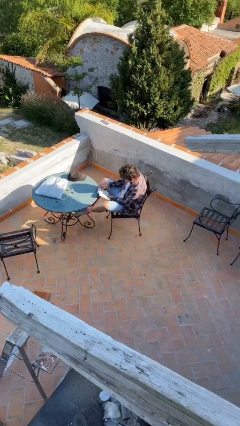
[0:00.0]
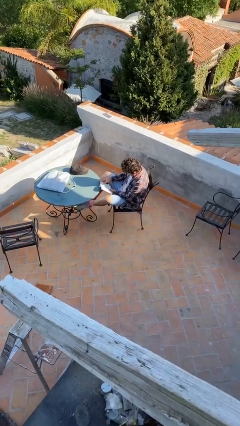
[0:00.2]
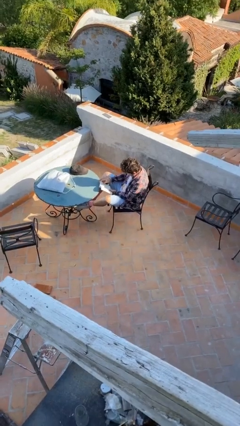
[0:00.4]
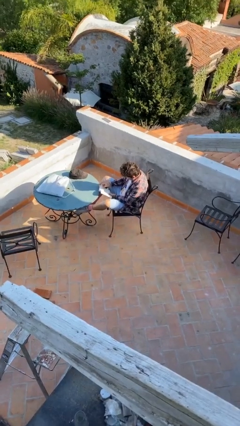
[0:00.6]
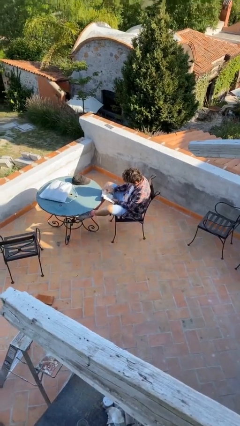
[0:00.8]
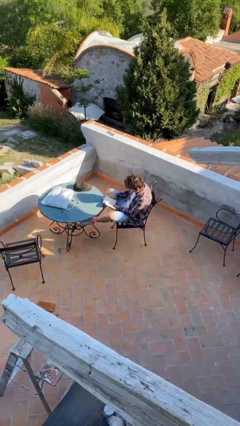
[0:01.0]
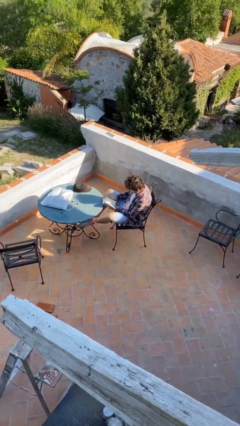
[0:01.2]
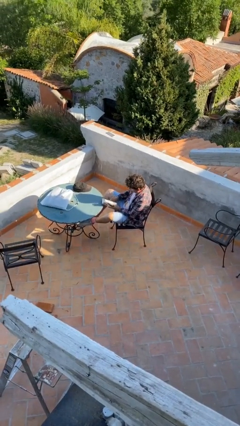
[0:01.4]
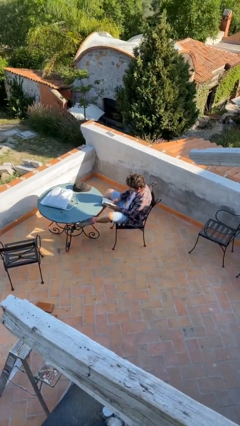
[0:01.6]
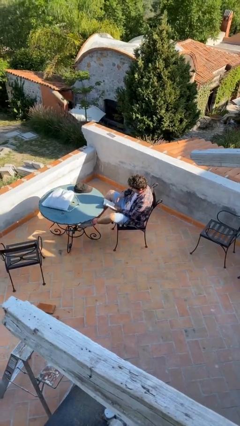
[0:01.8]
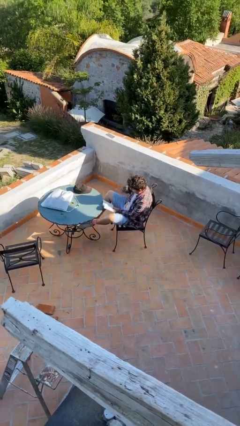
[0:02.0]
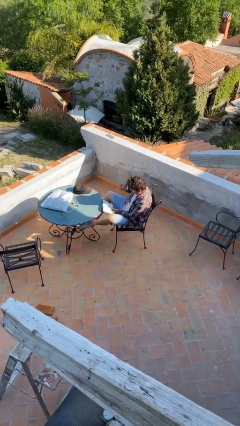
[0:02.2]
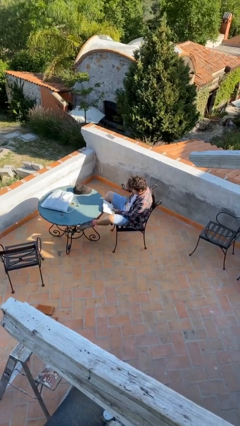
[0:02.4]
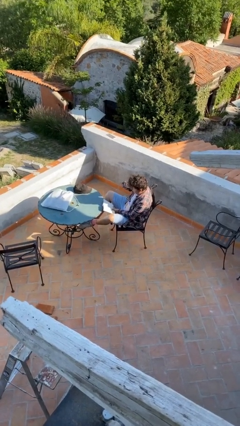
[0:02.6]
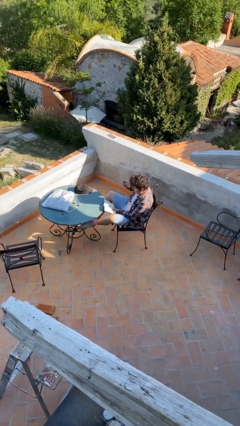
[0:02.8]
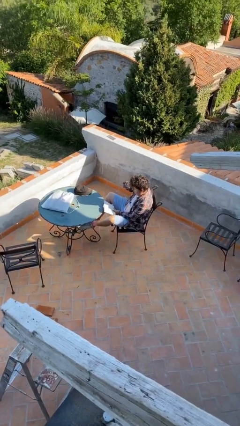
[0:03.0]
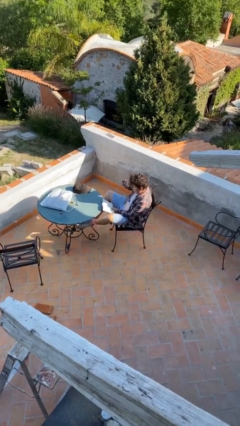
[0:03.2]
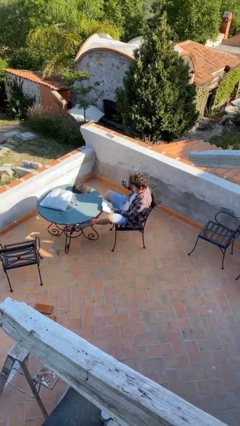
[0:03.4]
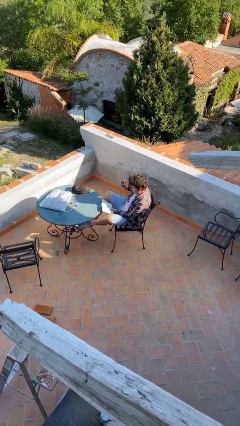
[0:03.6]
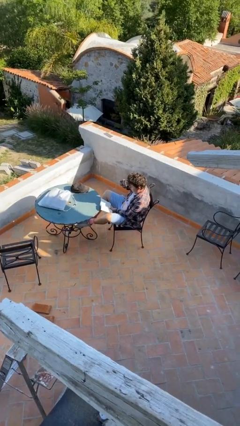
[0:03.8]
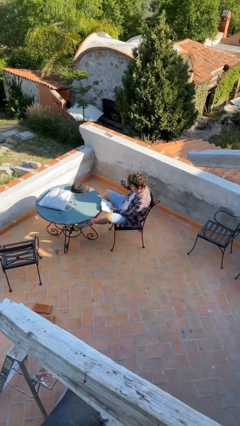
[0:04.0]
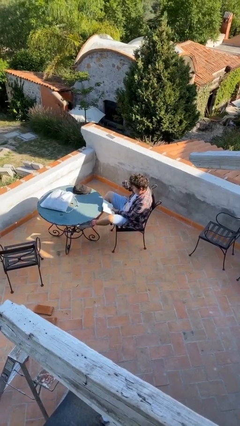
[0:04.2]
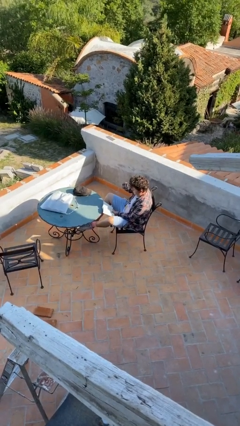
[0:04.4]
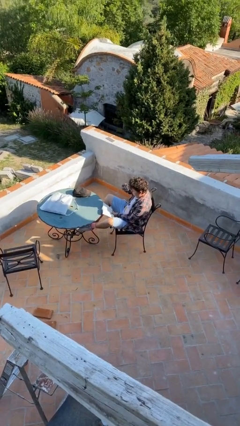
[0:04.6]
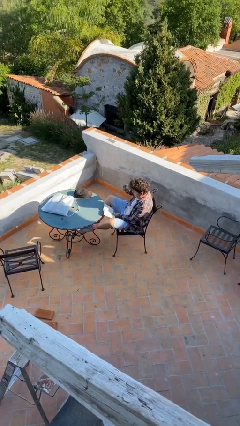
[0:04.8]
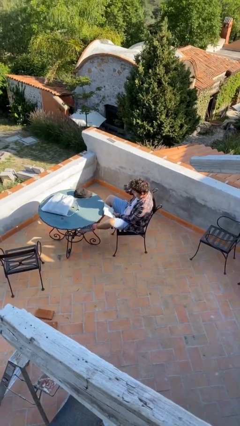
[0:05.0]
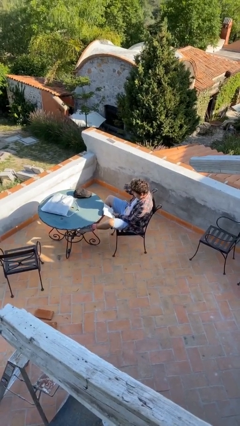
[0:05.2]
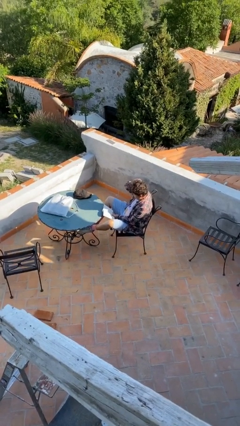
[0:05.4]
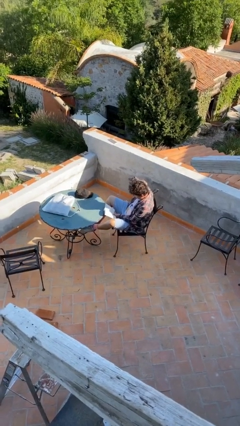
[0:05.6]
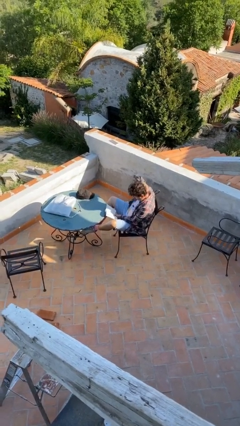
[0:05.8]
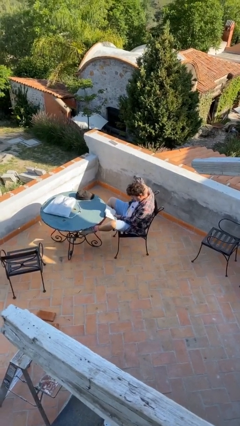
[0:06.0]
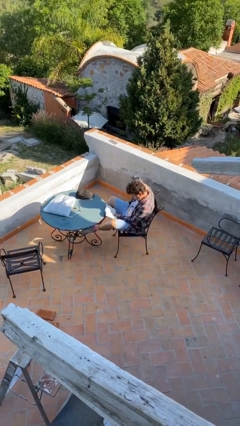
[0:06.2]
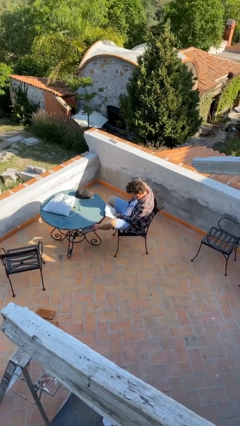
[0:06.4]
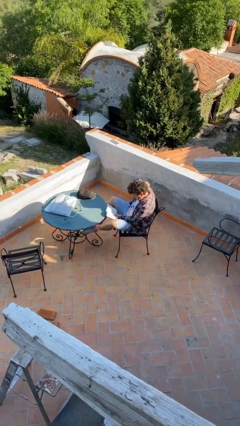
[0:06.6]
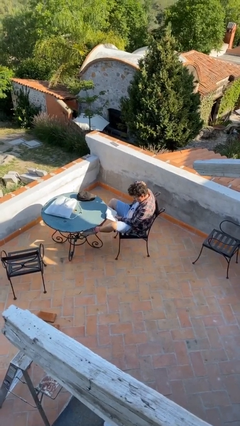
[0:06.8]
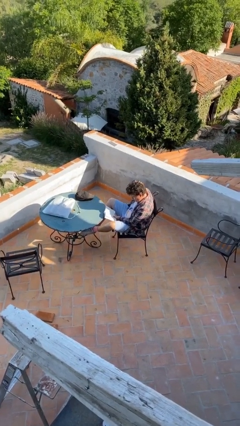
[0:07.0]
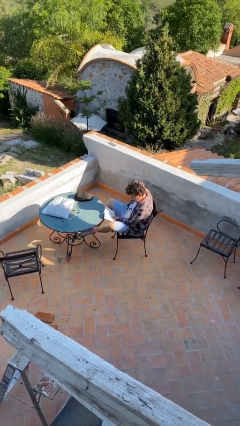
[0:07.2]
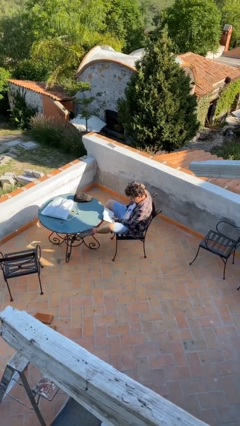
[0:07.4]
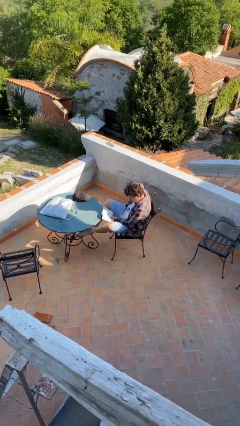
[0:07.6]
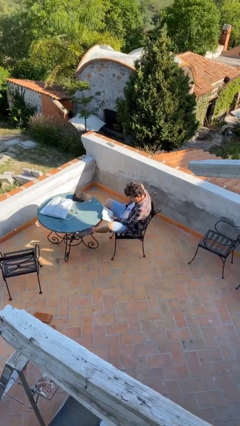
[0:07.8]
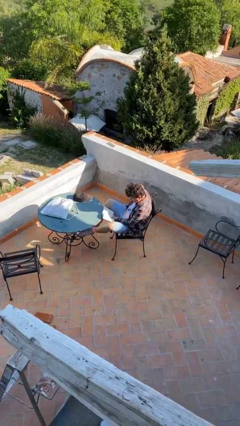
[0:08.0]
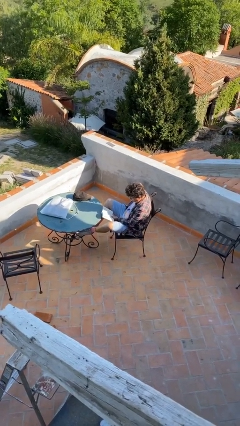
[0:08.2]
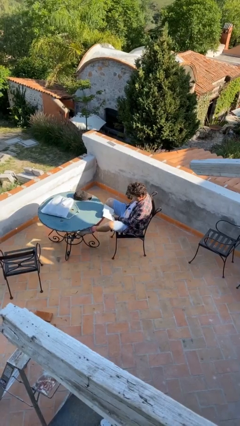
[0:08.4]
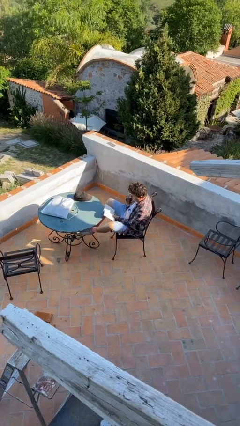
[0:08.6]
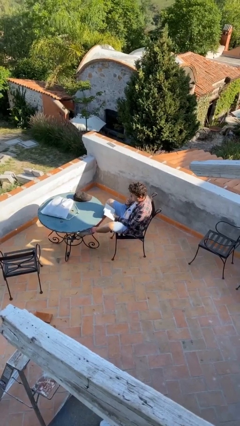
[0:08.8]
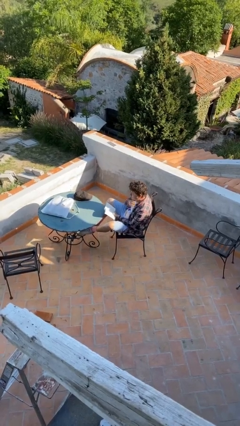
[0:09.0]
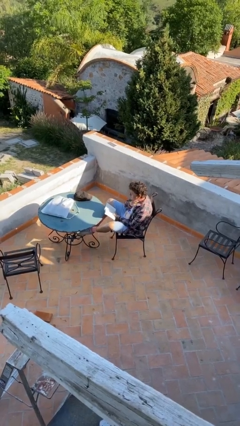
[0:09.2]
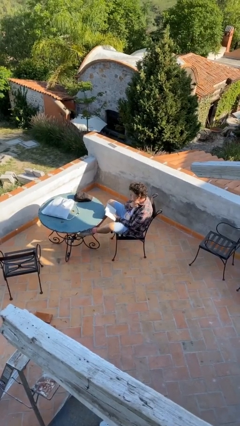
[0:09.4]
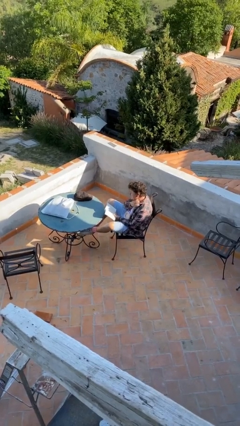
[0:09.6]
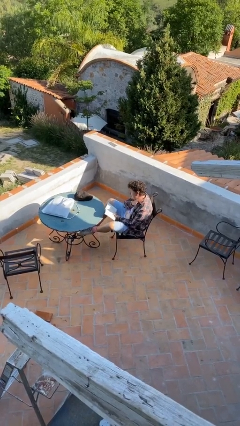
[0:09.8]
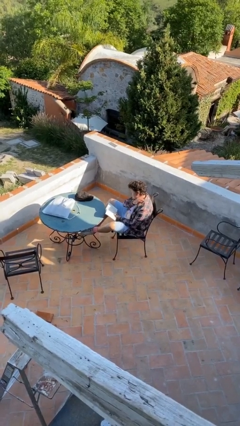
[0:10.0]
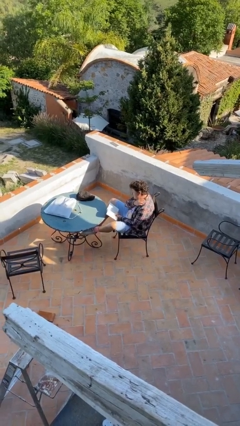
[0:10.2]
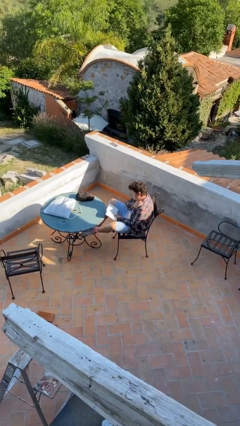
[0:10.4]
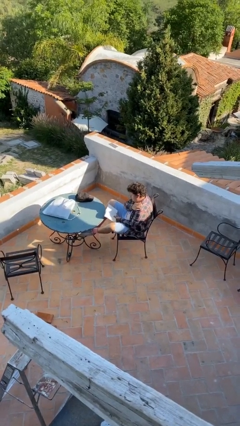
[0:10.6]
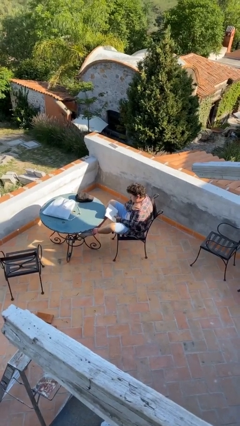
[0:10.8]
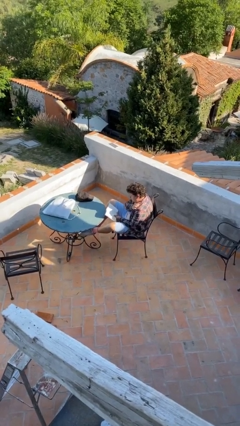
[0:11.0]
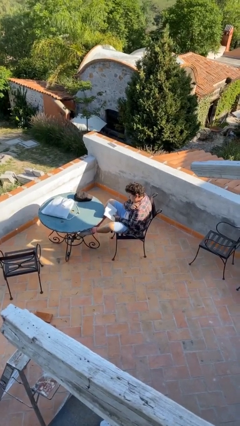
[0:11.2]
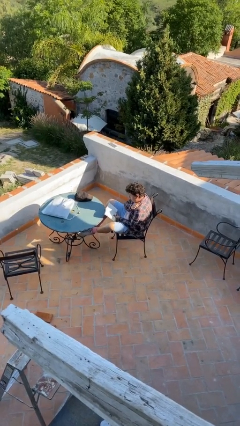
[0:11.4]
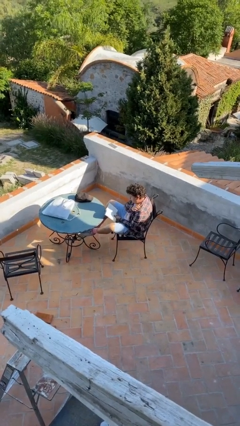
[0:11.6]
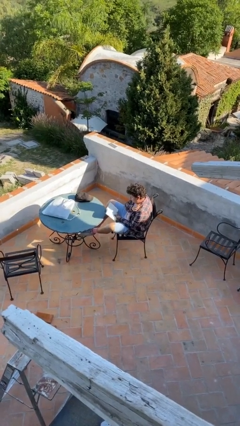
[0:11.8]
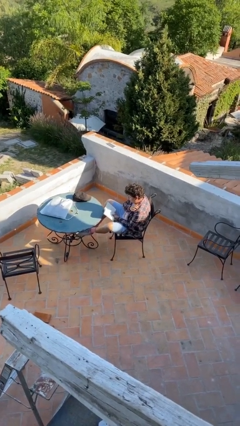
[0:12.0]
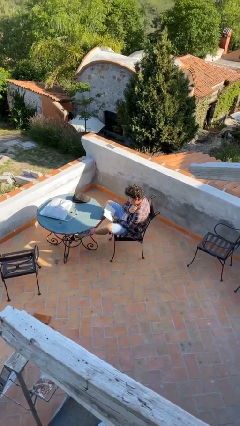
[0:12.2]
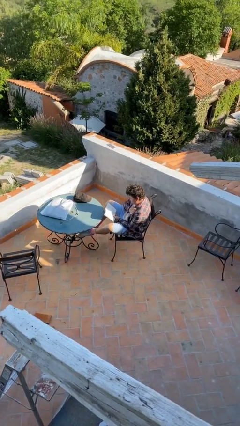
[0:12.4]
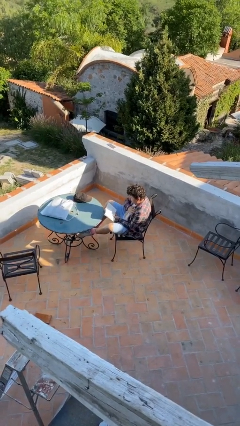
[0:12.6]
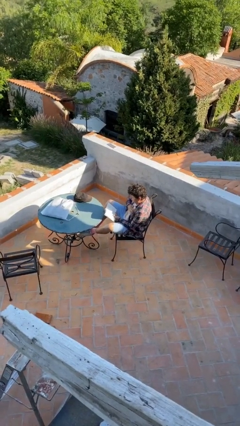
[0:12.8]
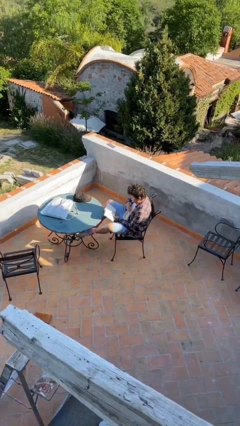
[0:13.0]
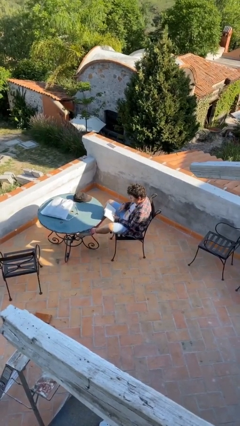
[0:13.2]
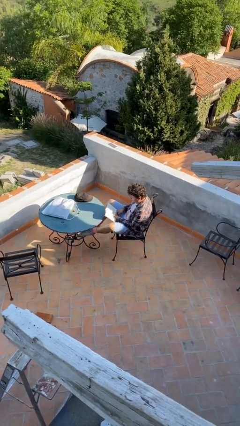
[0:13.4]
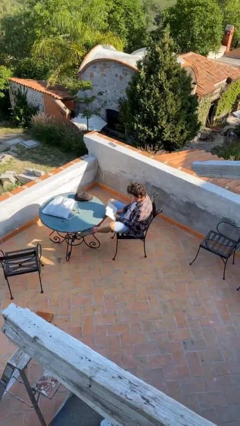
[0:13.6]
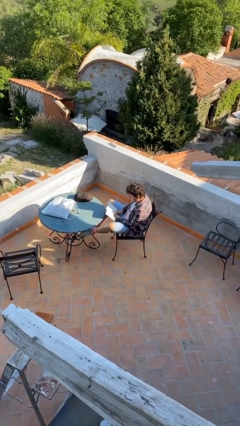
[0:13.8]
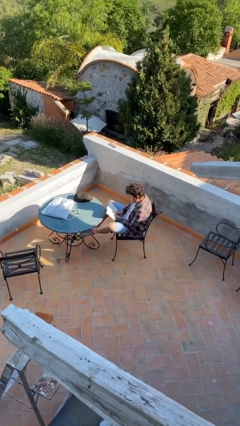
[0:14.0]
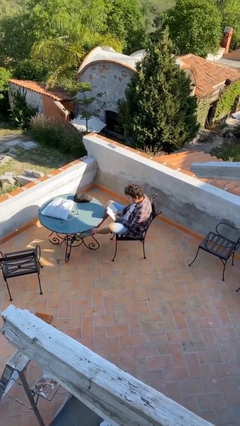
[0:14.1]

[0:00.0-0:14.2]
person reads document

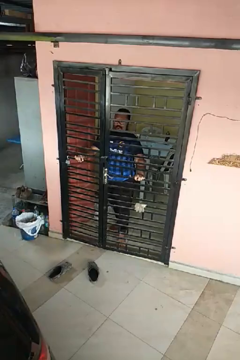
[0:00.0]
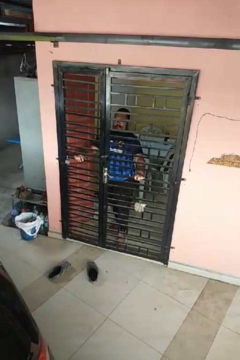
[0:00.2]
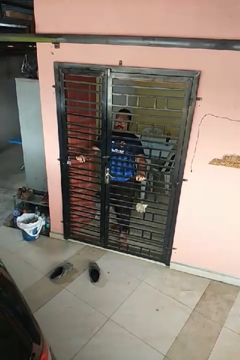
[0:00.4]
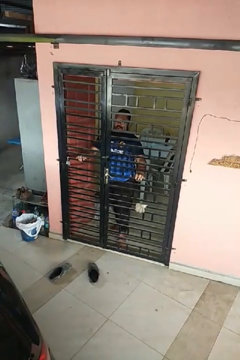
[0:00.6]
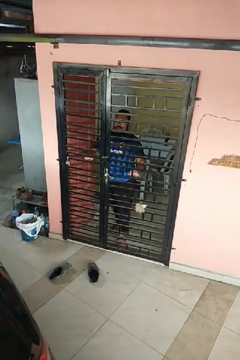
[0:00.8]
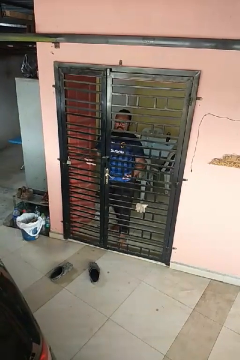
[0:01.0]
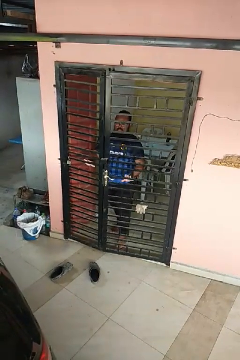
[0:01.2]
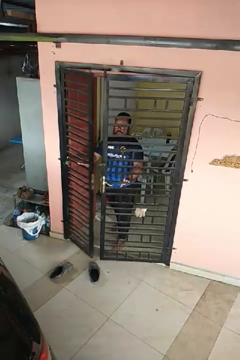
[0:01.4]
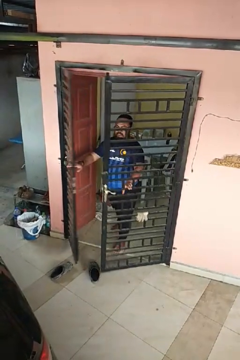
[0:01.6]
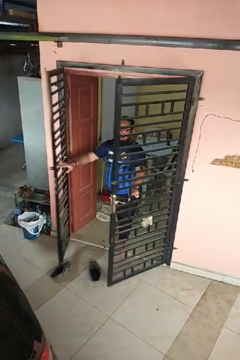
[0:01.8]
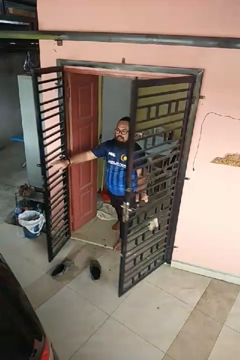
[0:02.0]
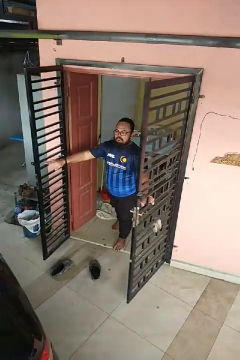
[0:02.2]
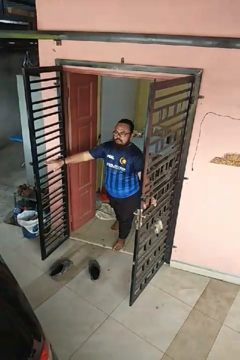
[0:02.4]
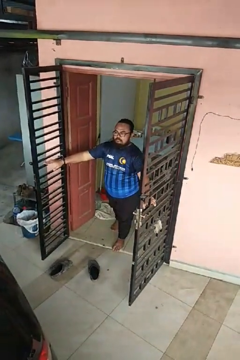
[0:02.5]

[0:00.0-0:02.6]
person opens gate

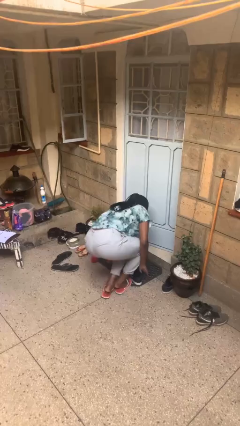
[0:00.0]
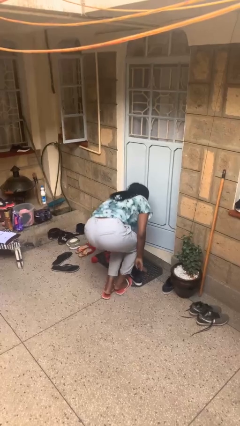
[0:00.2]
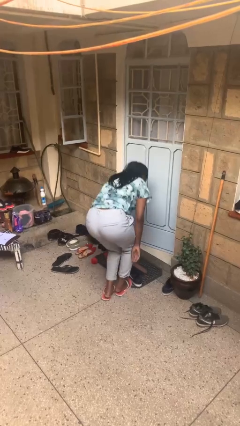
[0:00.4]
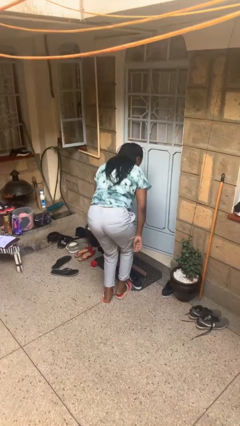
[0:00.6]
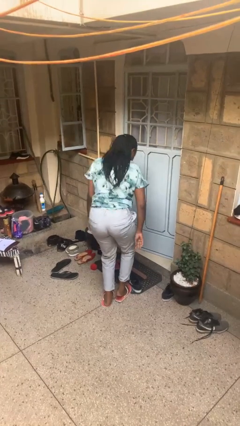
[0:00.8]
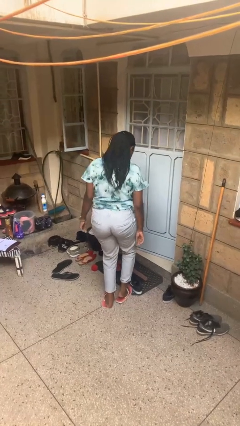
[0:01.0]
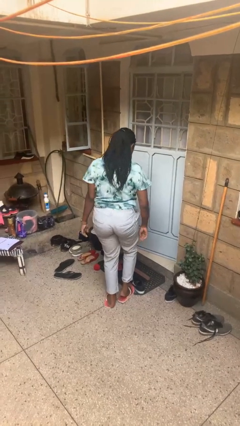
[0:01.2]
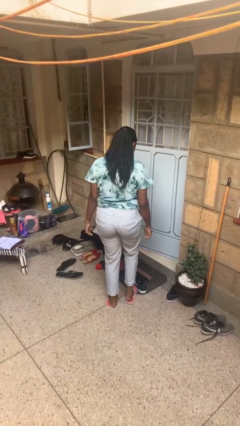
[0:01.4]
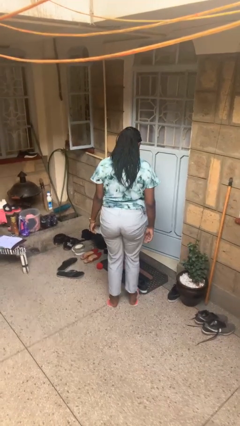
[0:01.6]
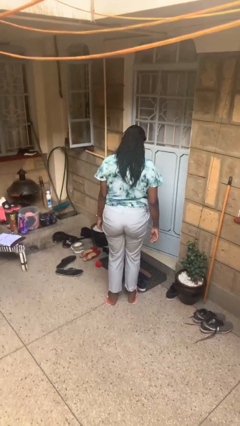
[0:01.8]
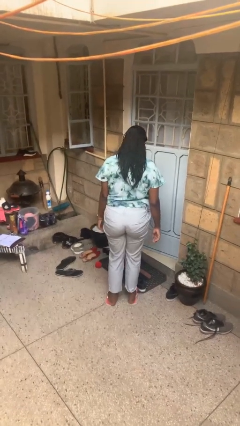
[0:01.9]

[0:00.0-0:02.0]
person stands up from floor
